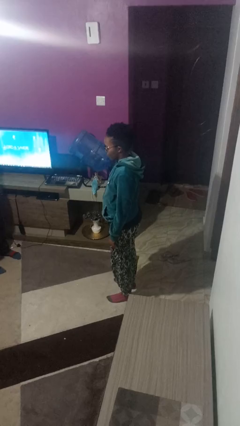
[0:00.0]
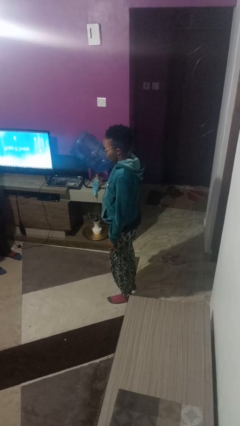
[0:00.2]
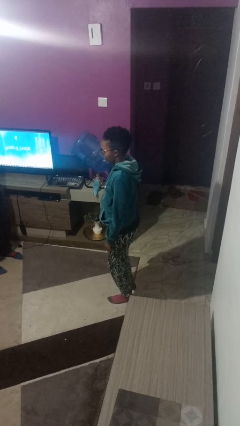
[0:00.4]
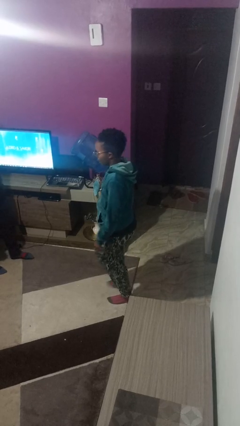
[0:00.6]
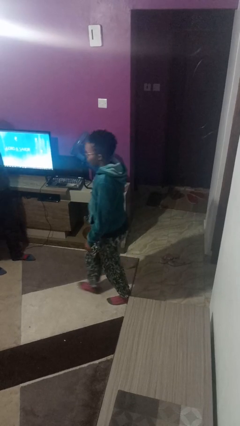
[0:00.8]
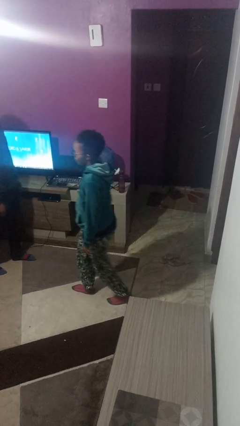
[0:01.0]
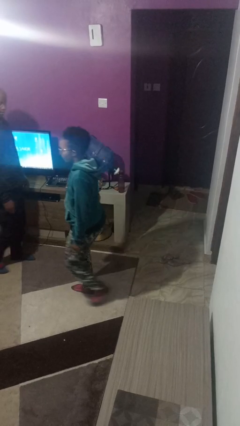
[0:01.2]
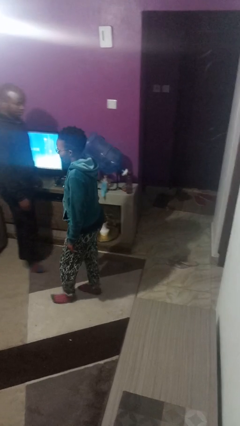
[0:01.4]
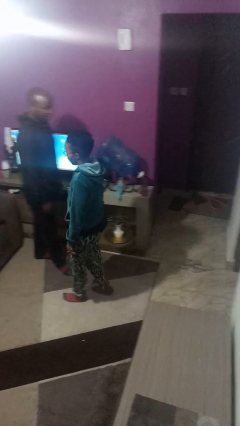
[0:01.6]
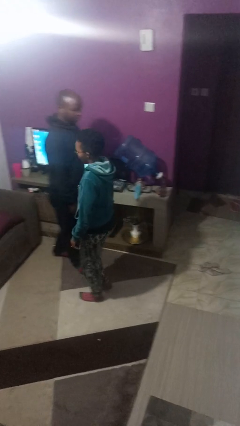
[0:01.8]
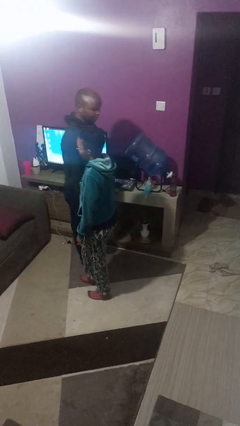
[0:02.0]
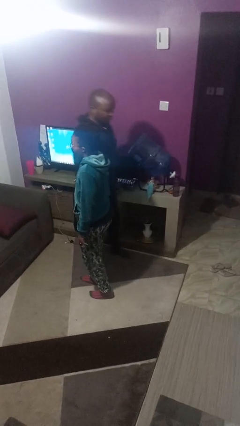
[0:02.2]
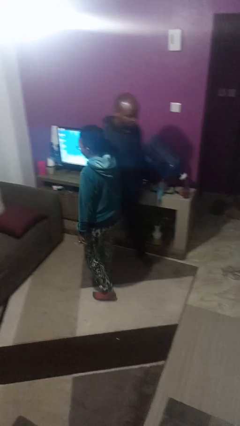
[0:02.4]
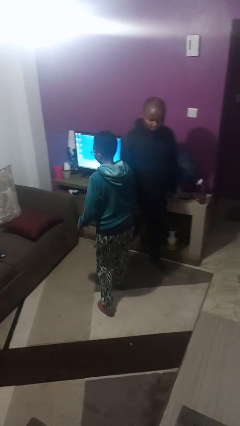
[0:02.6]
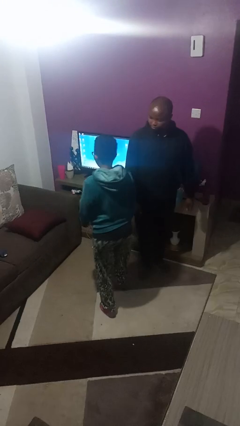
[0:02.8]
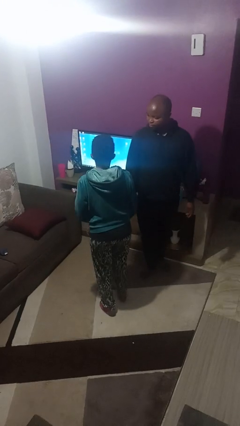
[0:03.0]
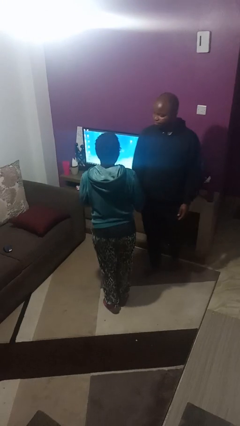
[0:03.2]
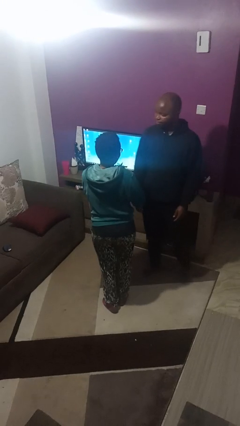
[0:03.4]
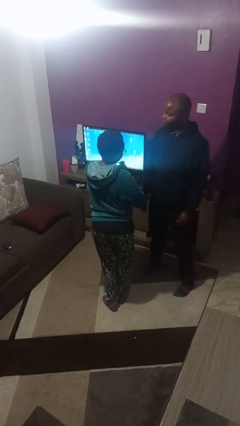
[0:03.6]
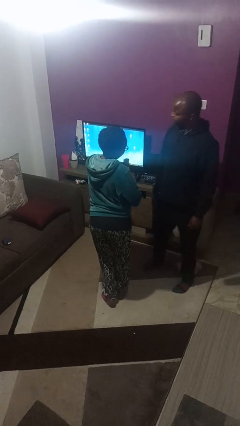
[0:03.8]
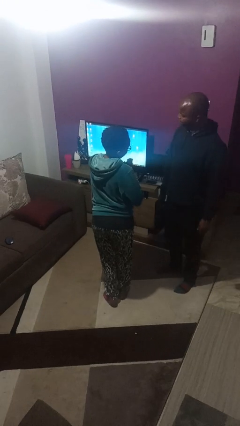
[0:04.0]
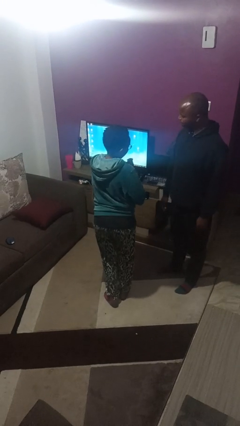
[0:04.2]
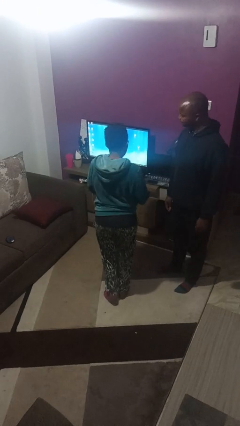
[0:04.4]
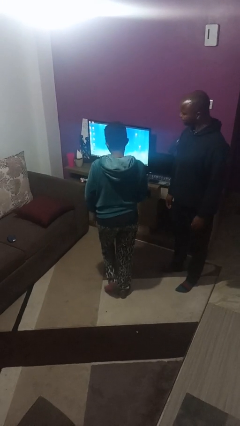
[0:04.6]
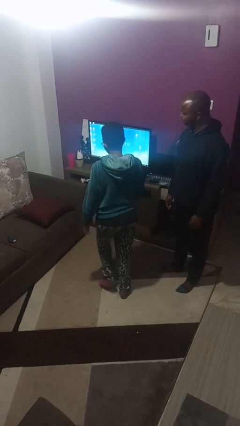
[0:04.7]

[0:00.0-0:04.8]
person bumps into person

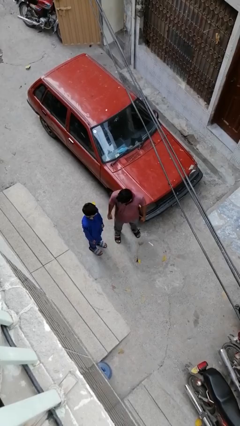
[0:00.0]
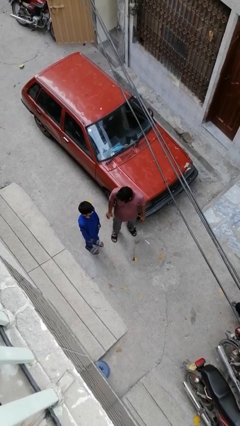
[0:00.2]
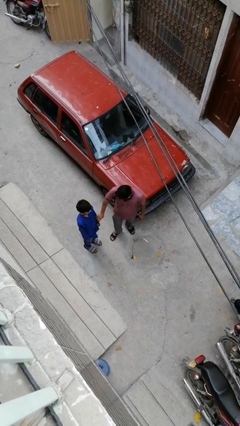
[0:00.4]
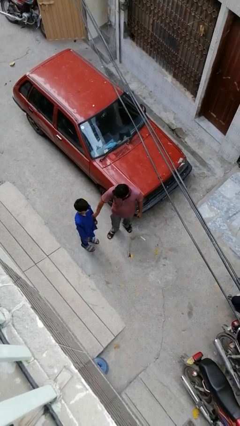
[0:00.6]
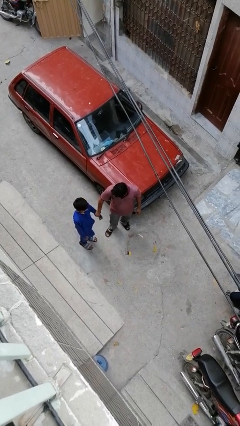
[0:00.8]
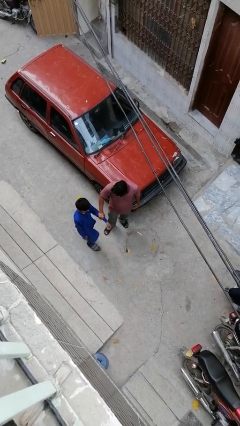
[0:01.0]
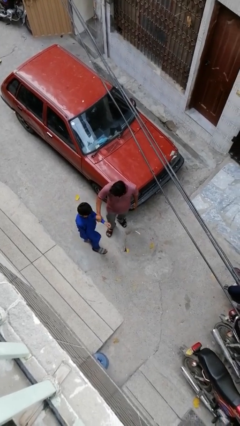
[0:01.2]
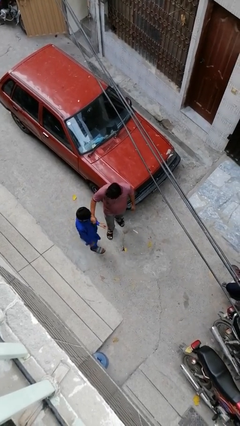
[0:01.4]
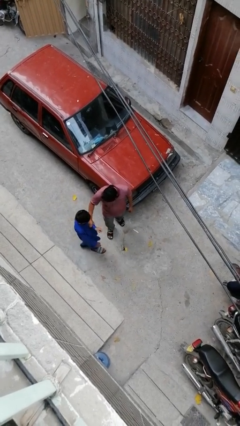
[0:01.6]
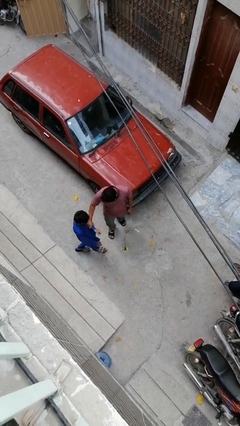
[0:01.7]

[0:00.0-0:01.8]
person grabs person by forearm

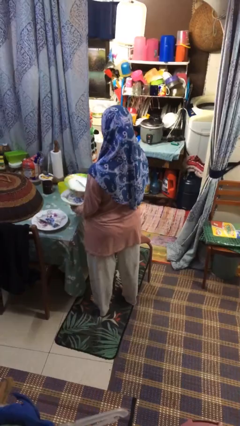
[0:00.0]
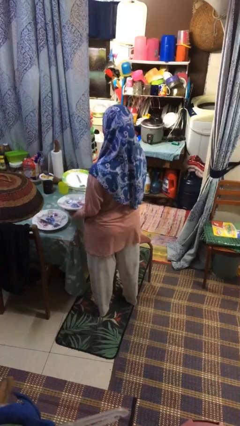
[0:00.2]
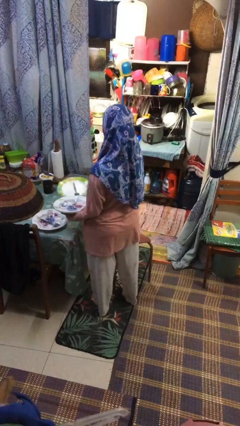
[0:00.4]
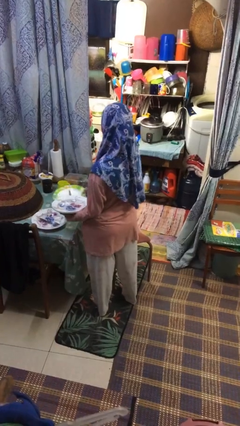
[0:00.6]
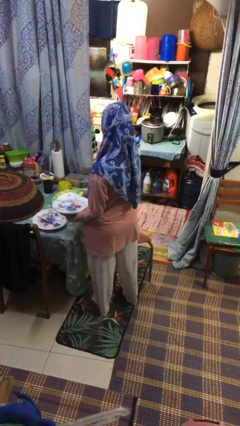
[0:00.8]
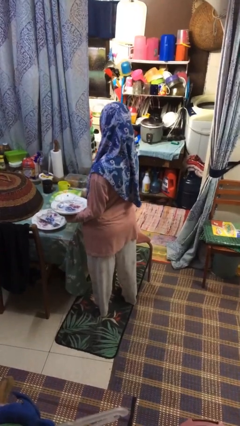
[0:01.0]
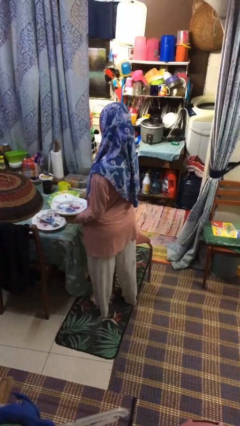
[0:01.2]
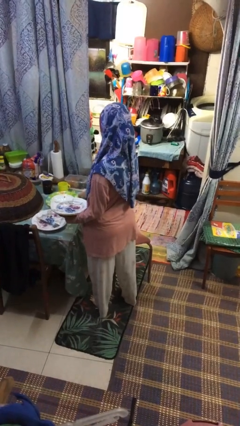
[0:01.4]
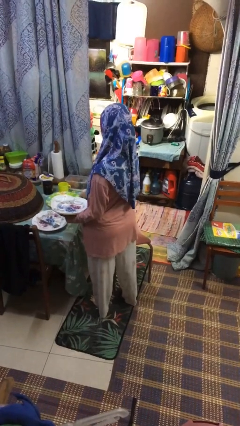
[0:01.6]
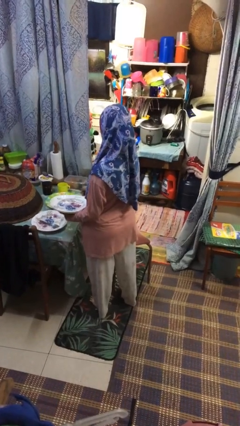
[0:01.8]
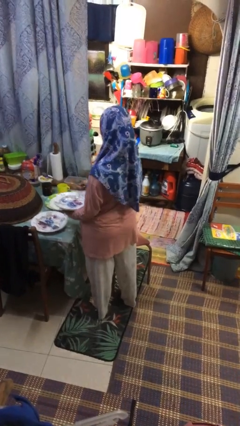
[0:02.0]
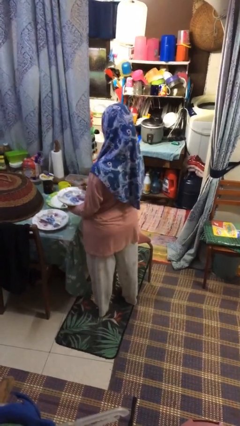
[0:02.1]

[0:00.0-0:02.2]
person sets table

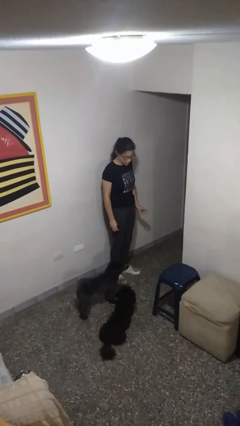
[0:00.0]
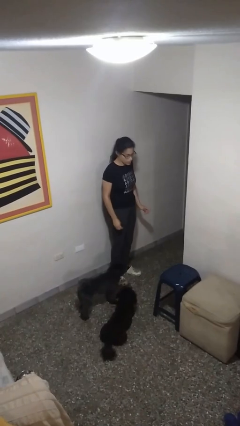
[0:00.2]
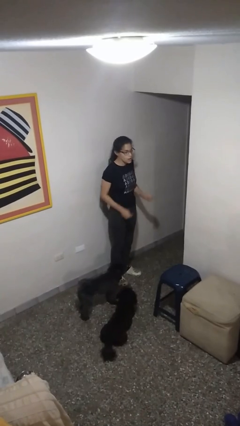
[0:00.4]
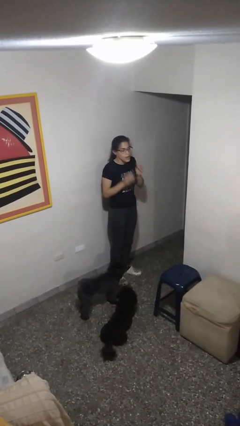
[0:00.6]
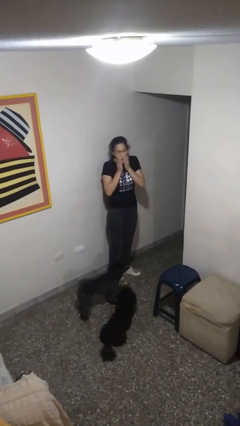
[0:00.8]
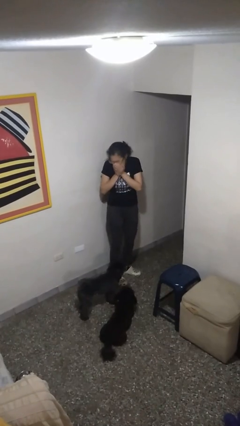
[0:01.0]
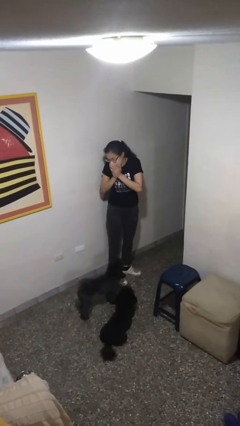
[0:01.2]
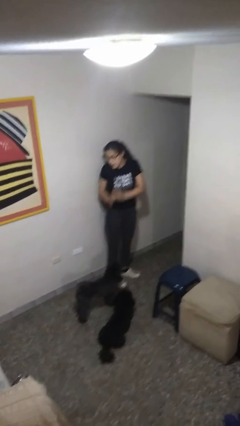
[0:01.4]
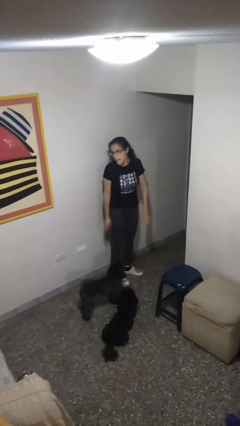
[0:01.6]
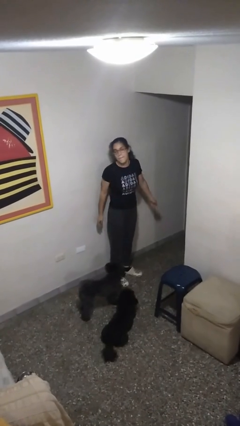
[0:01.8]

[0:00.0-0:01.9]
person sneezes into hand

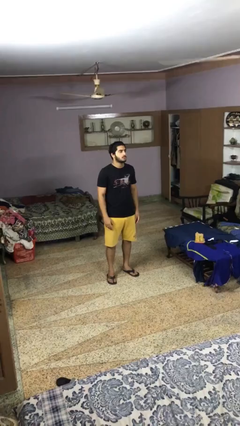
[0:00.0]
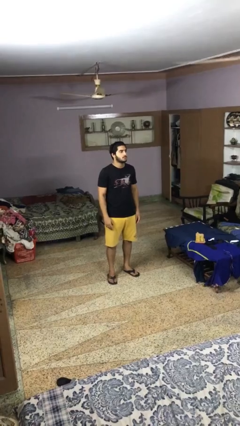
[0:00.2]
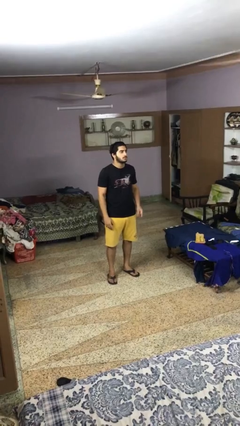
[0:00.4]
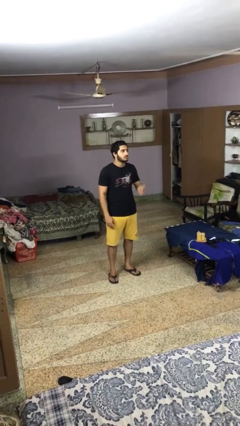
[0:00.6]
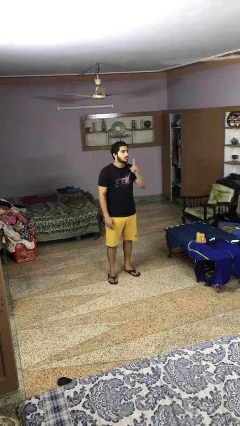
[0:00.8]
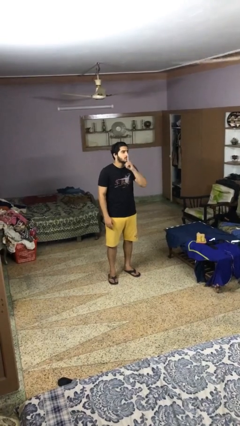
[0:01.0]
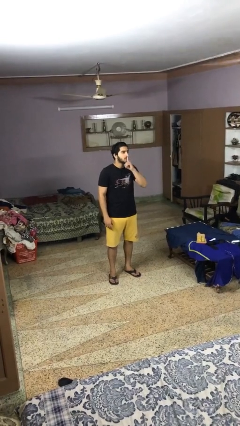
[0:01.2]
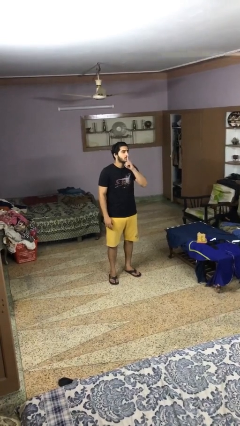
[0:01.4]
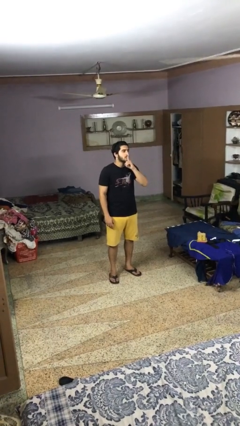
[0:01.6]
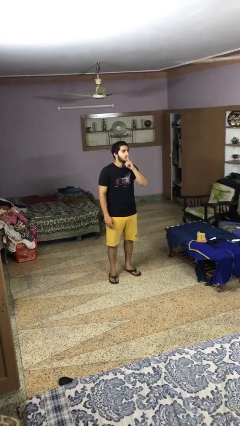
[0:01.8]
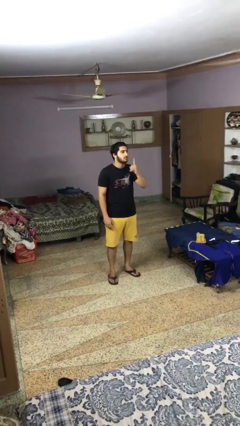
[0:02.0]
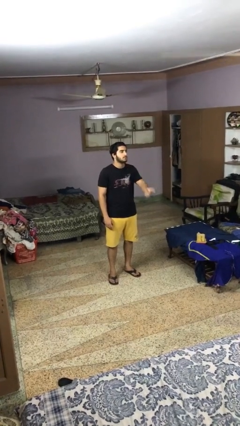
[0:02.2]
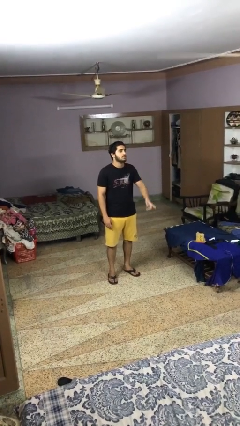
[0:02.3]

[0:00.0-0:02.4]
person gestures be quiet

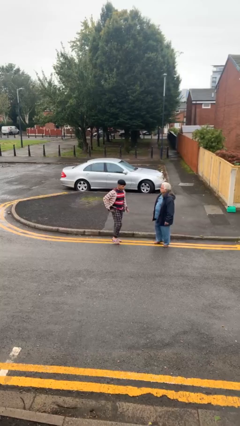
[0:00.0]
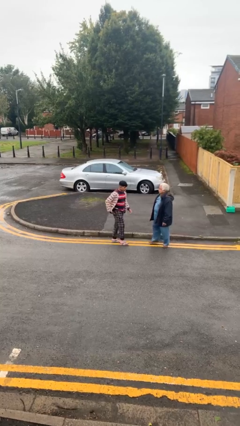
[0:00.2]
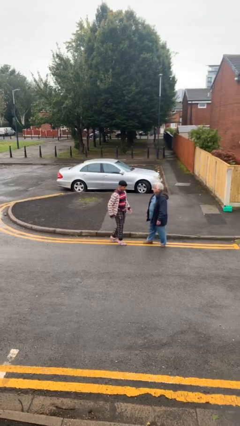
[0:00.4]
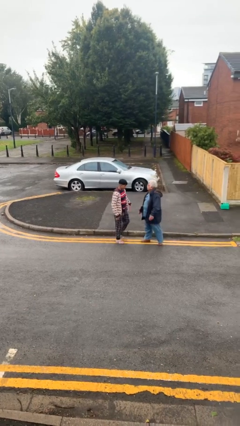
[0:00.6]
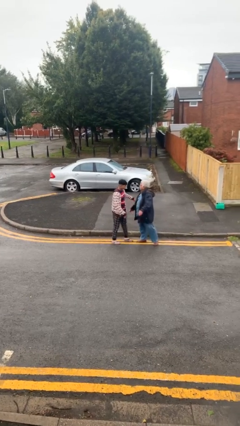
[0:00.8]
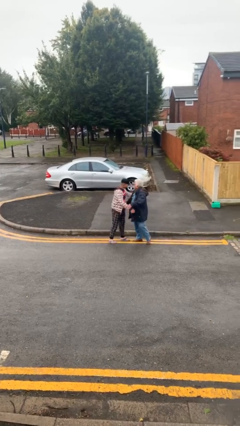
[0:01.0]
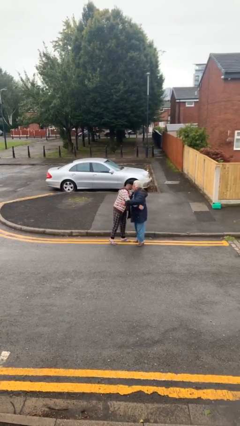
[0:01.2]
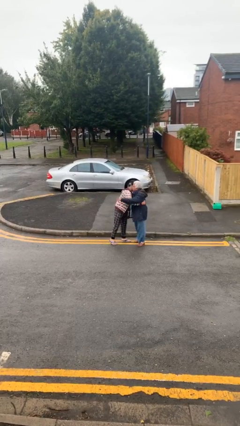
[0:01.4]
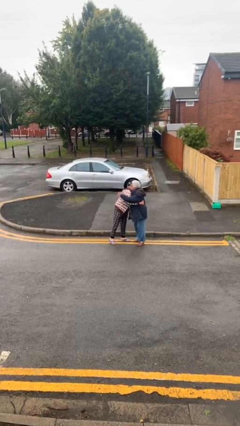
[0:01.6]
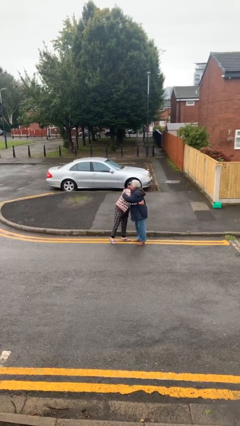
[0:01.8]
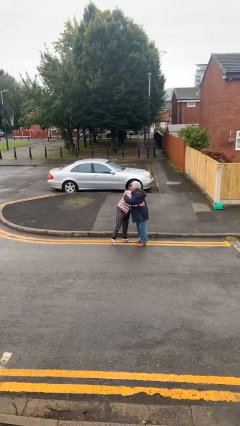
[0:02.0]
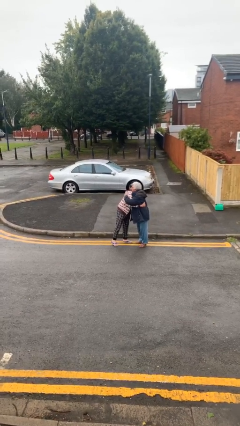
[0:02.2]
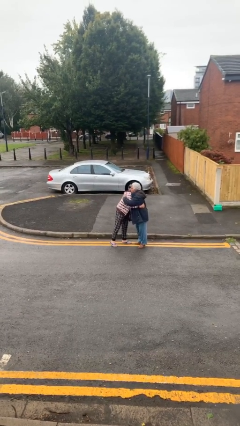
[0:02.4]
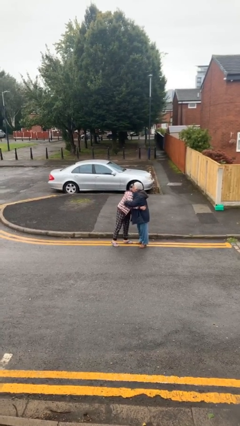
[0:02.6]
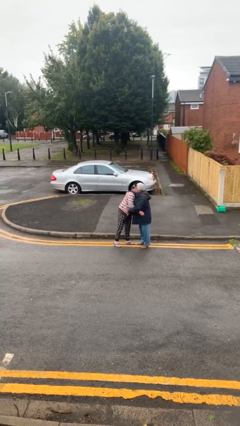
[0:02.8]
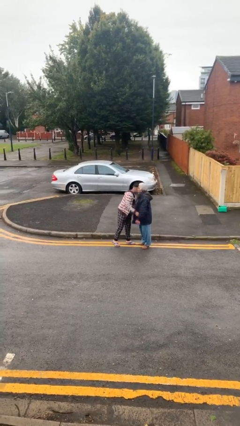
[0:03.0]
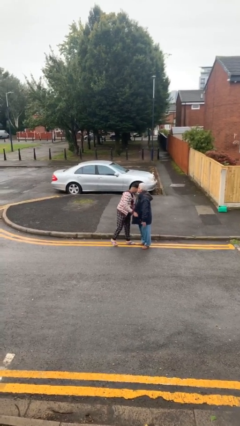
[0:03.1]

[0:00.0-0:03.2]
person embraces person

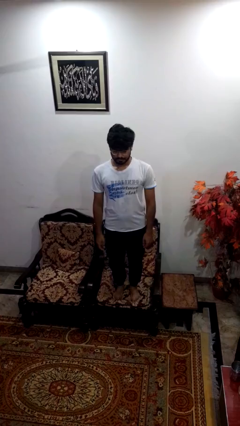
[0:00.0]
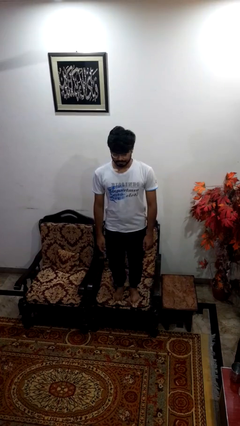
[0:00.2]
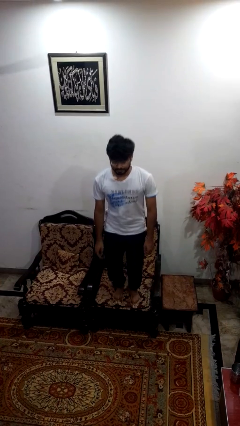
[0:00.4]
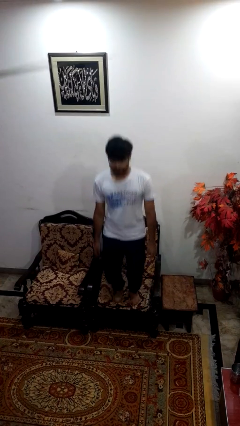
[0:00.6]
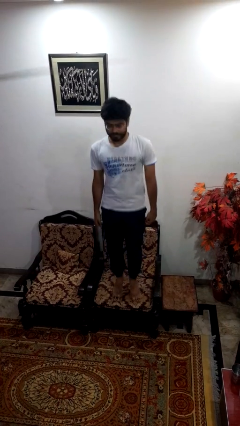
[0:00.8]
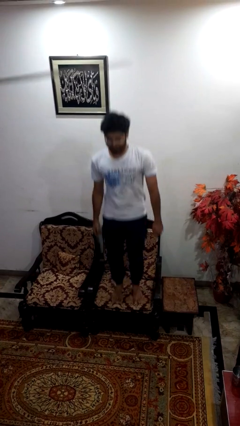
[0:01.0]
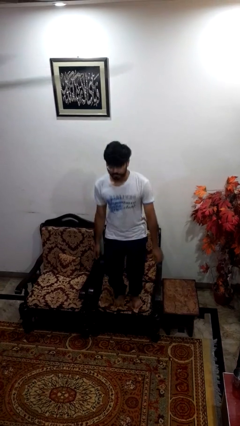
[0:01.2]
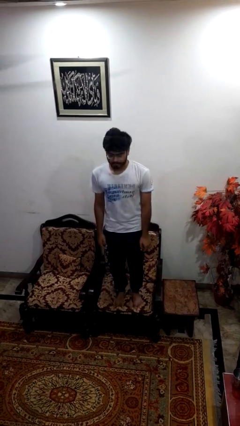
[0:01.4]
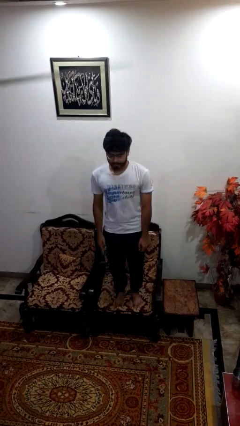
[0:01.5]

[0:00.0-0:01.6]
person jumps on couch
